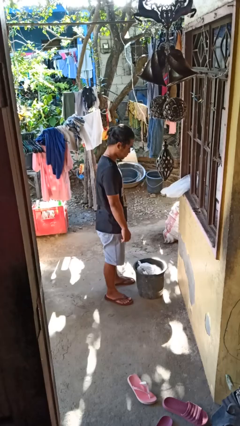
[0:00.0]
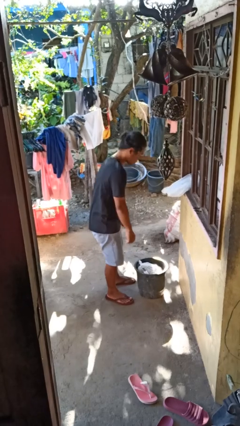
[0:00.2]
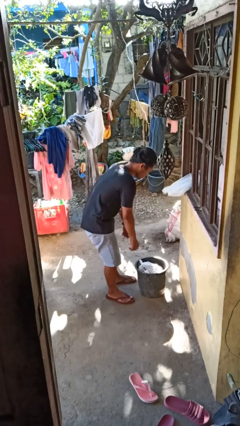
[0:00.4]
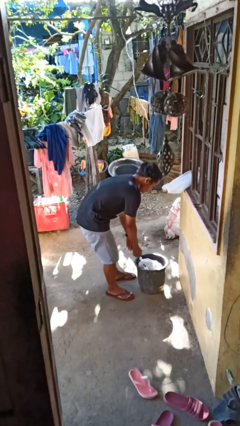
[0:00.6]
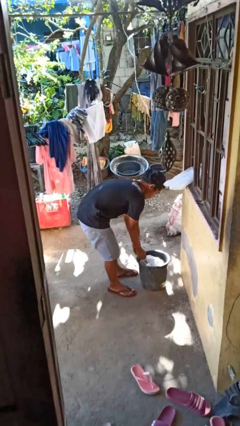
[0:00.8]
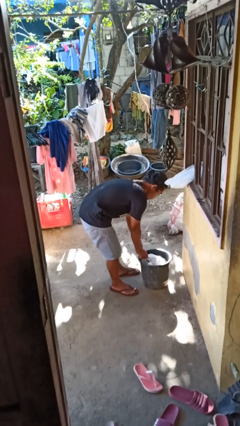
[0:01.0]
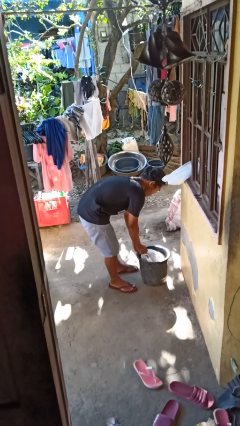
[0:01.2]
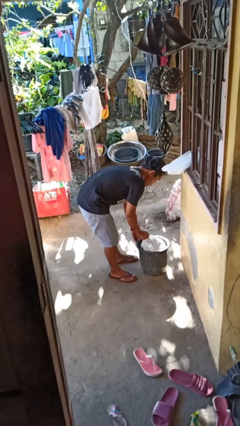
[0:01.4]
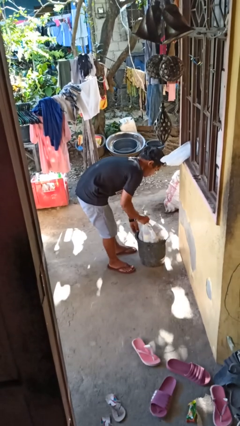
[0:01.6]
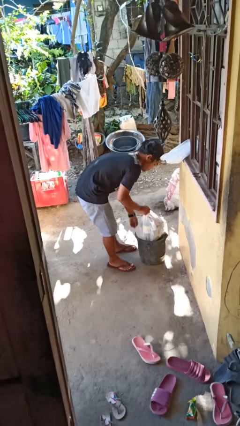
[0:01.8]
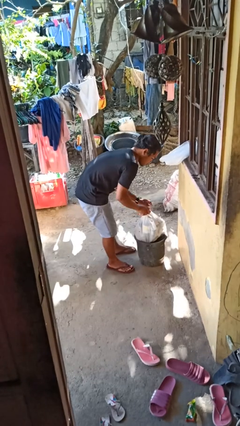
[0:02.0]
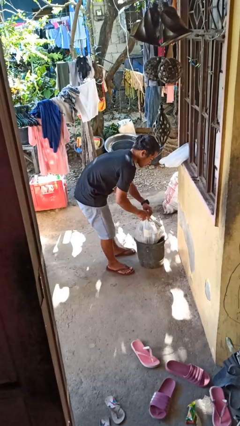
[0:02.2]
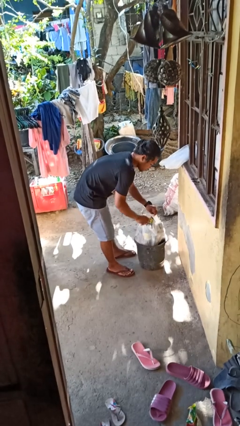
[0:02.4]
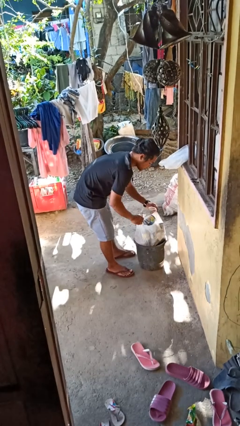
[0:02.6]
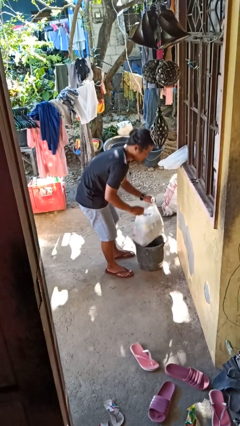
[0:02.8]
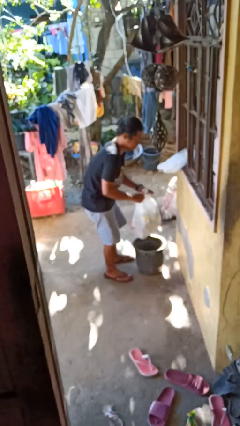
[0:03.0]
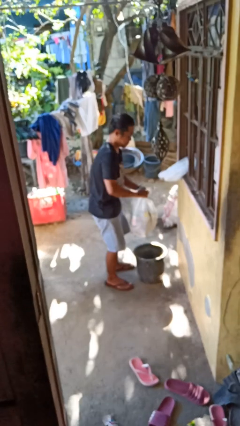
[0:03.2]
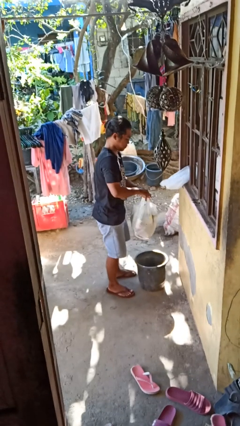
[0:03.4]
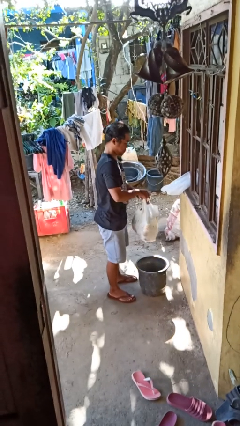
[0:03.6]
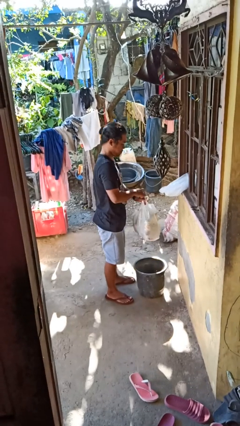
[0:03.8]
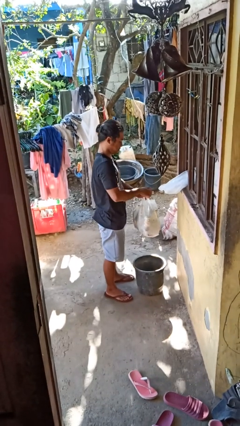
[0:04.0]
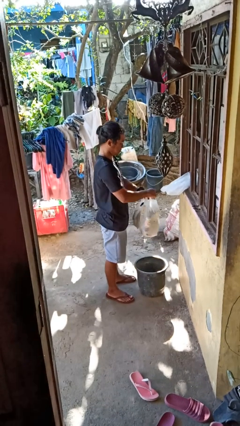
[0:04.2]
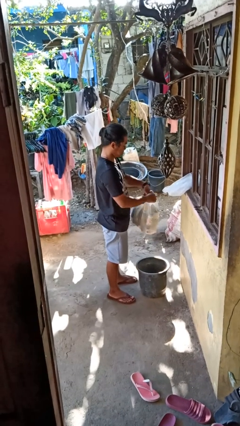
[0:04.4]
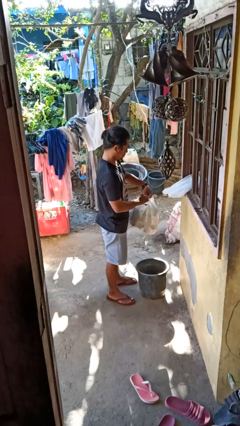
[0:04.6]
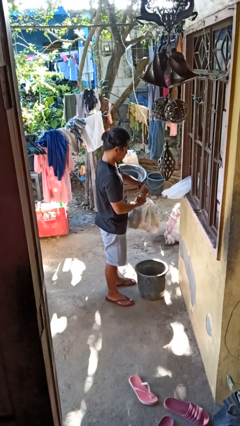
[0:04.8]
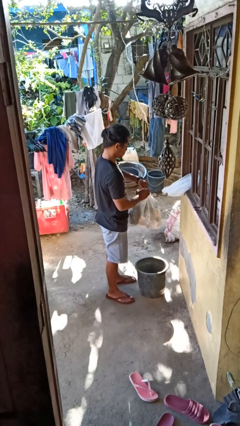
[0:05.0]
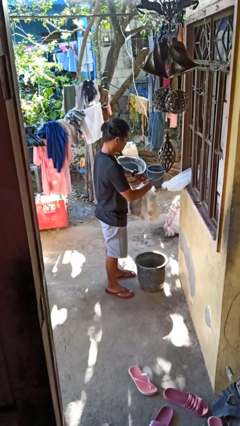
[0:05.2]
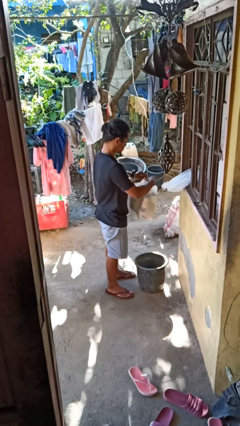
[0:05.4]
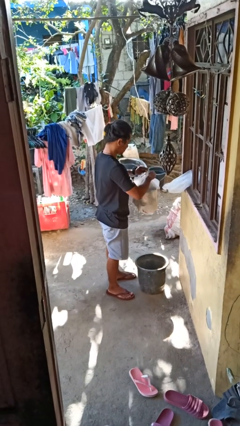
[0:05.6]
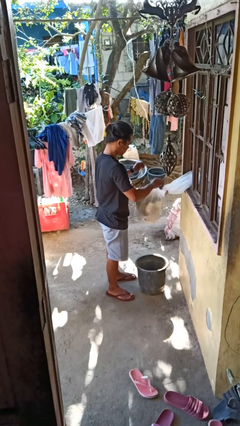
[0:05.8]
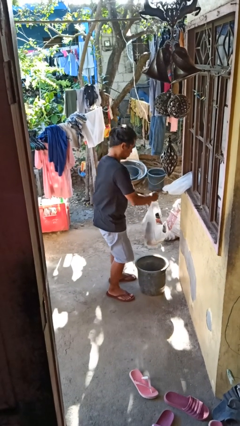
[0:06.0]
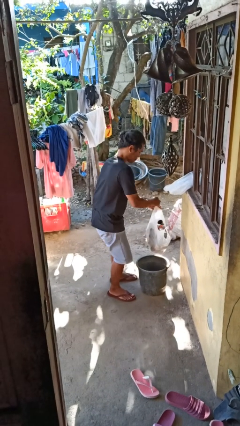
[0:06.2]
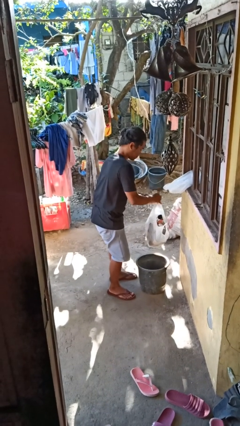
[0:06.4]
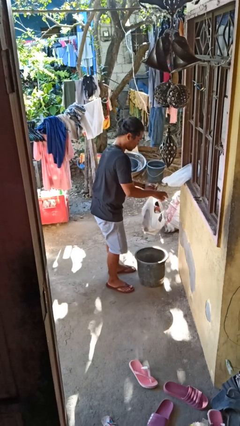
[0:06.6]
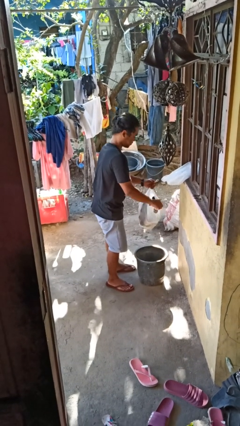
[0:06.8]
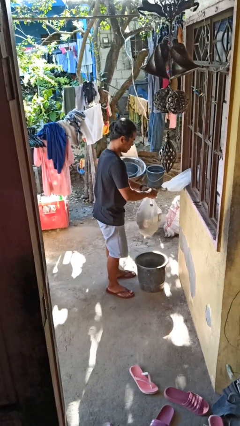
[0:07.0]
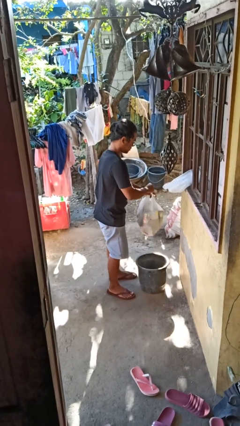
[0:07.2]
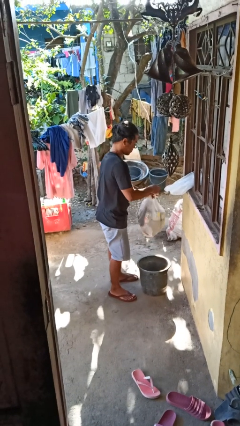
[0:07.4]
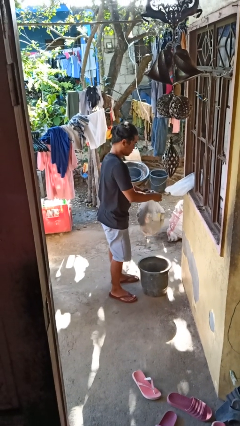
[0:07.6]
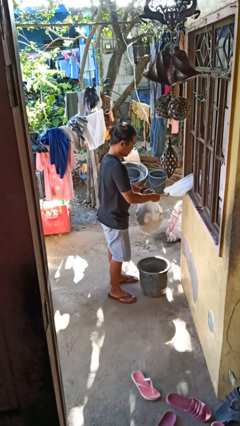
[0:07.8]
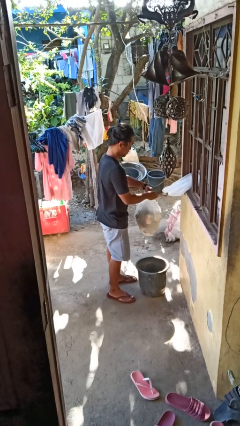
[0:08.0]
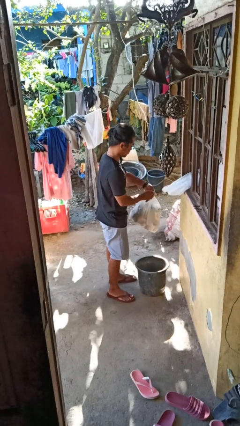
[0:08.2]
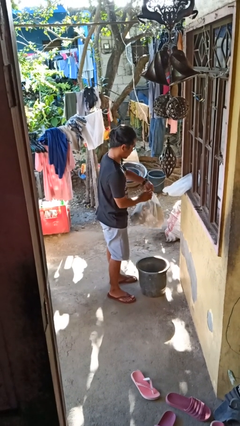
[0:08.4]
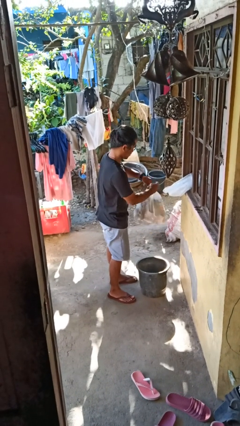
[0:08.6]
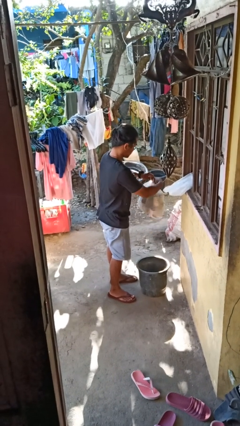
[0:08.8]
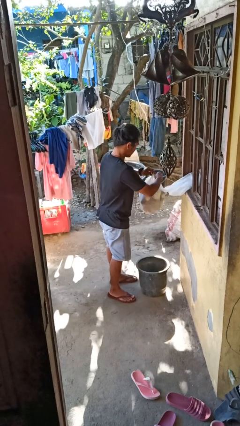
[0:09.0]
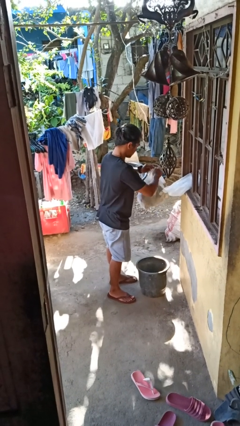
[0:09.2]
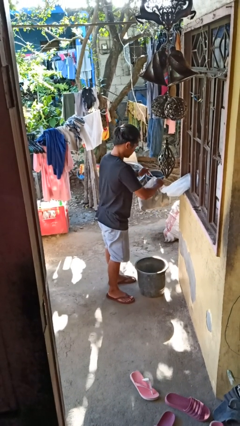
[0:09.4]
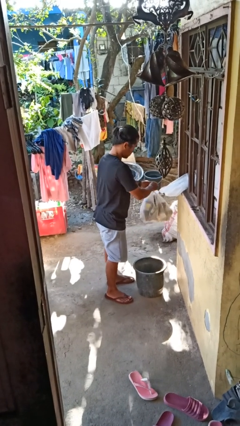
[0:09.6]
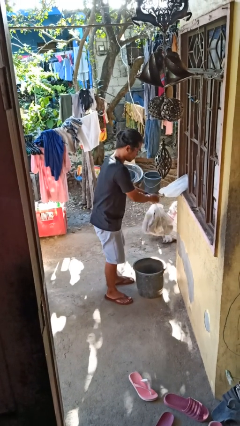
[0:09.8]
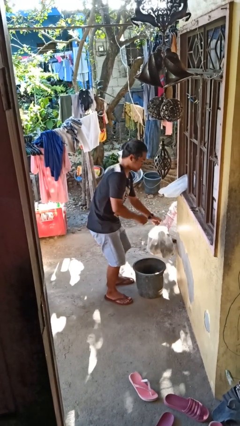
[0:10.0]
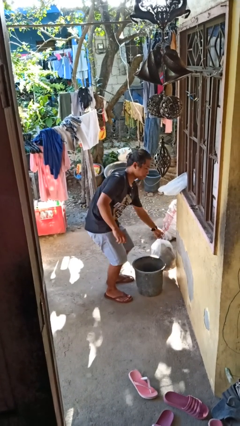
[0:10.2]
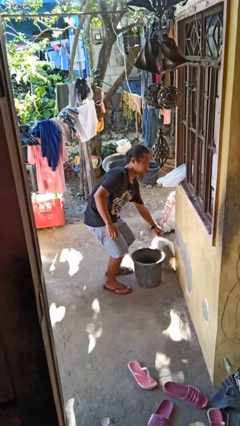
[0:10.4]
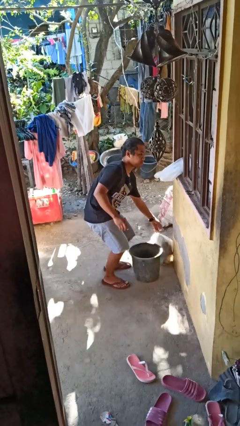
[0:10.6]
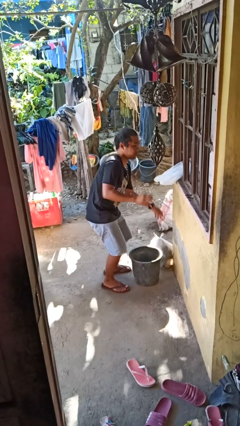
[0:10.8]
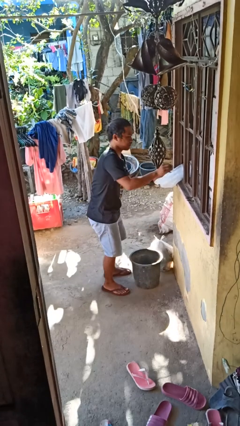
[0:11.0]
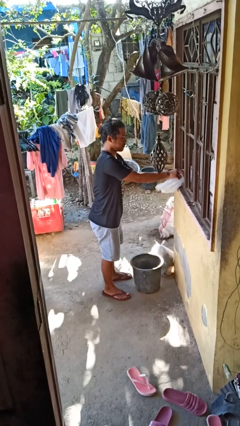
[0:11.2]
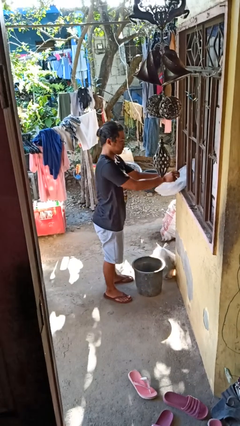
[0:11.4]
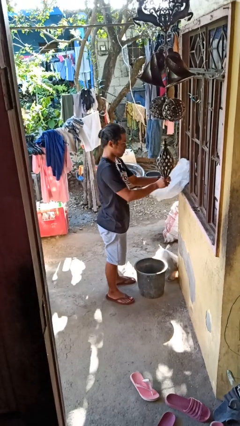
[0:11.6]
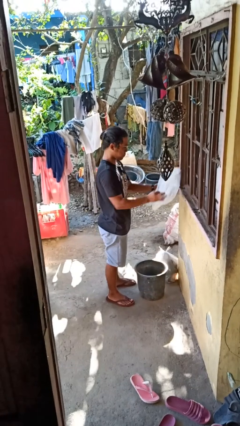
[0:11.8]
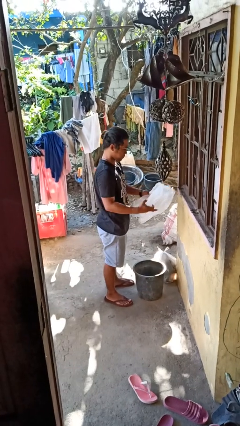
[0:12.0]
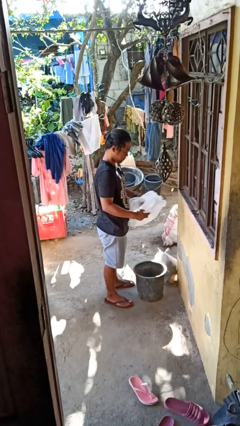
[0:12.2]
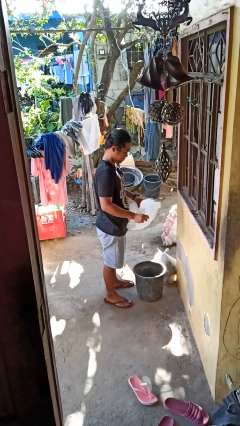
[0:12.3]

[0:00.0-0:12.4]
person removes trashbag from trashcan

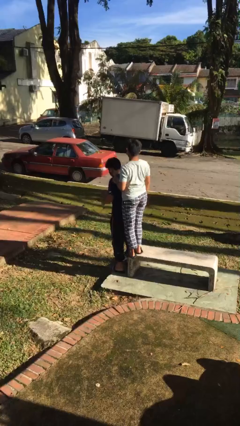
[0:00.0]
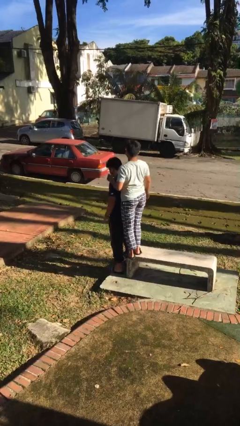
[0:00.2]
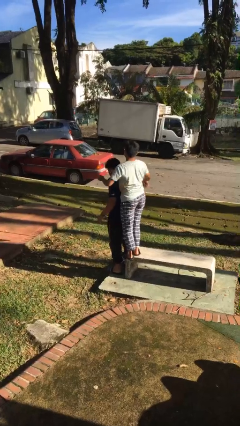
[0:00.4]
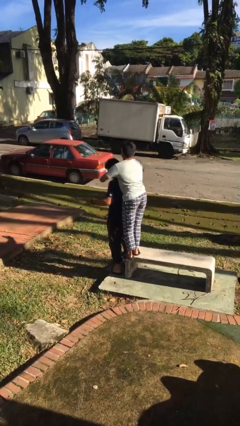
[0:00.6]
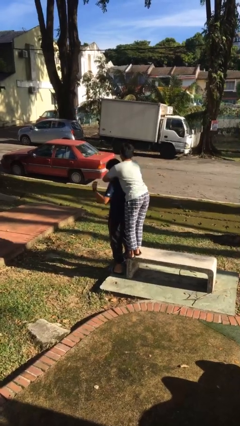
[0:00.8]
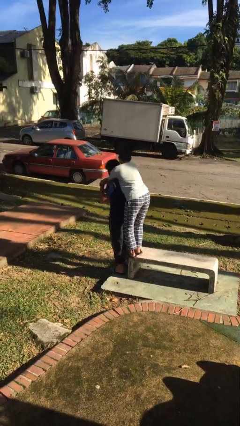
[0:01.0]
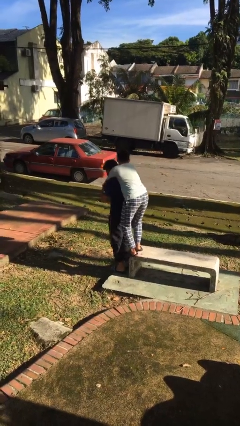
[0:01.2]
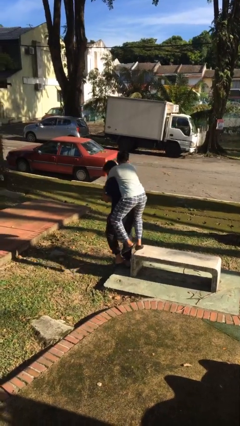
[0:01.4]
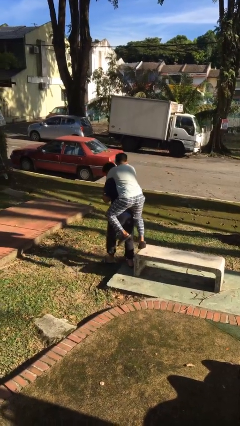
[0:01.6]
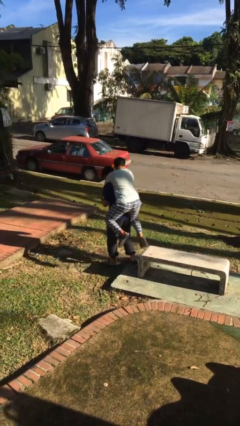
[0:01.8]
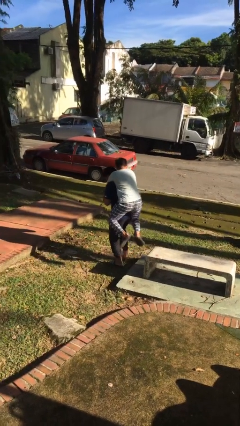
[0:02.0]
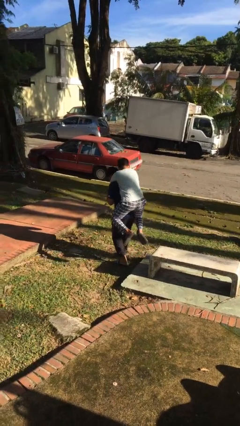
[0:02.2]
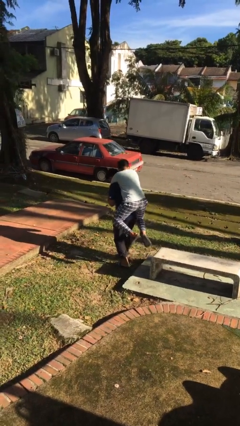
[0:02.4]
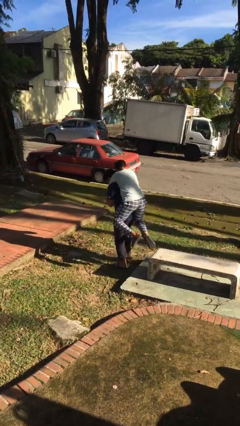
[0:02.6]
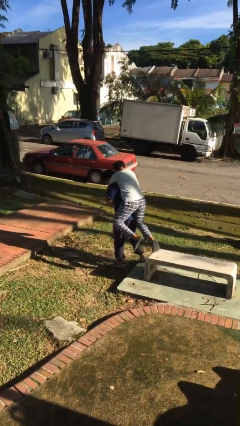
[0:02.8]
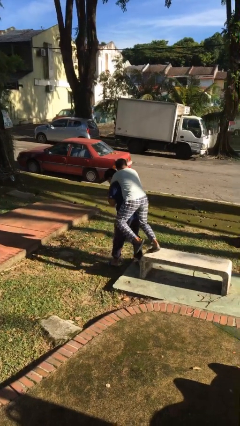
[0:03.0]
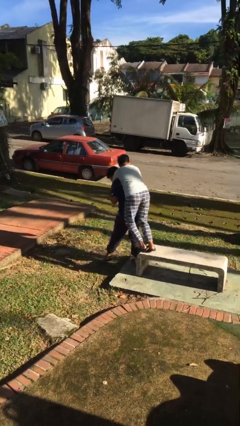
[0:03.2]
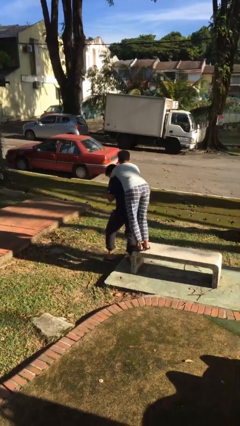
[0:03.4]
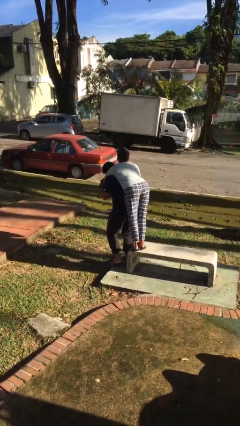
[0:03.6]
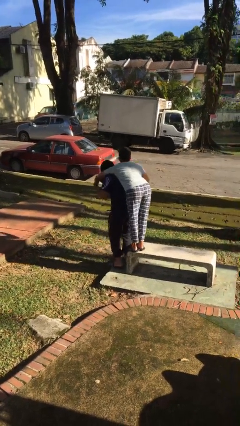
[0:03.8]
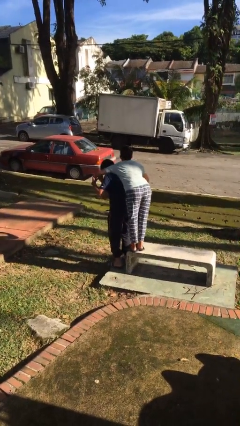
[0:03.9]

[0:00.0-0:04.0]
person carries person on back

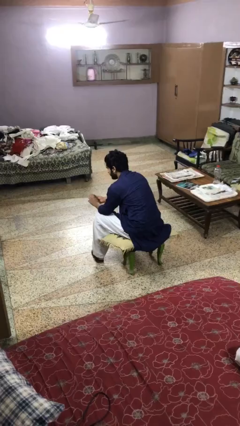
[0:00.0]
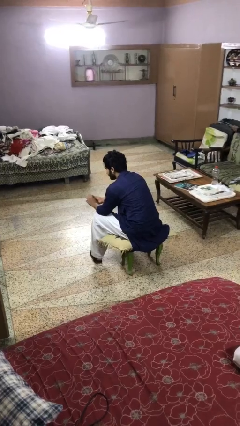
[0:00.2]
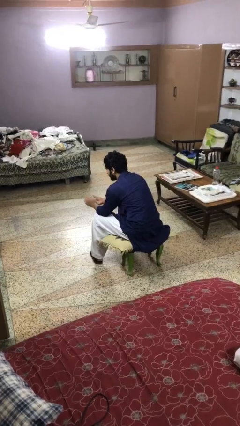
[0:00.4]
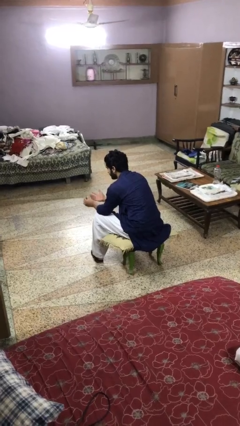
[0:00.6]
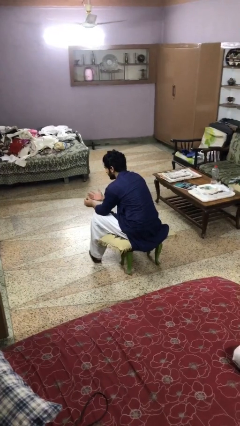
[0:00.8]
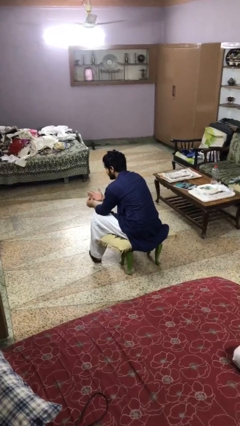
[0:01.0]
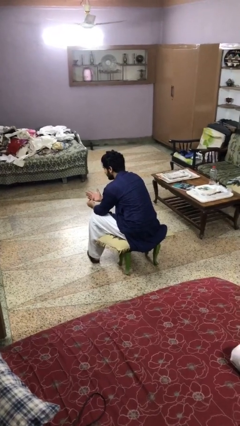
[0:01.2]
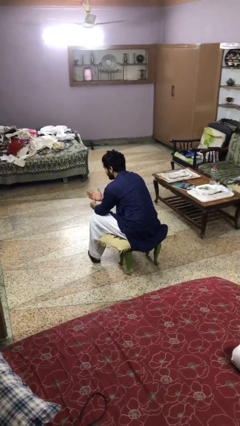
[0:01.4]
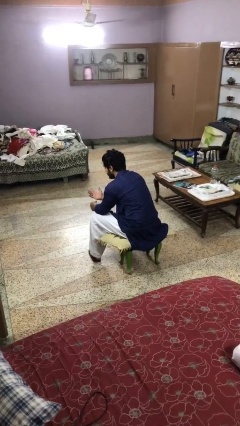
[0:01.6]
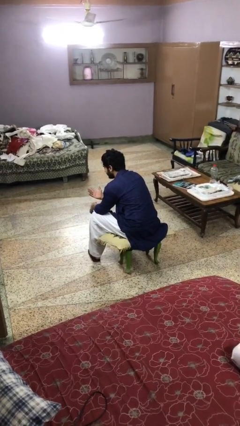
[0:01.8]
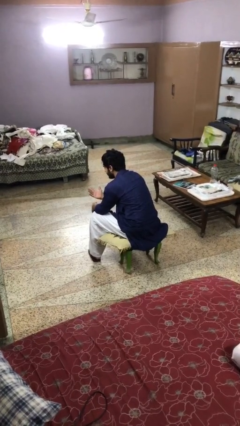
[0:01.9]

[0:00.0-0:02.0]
person puts on ring
